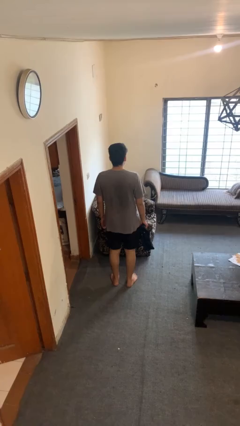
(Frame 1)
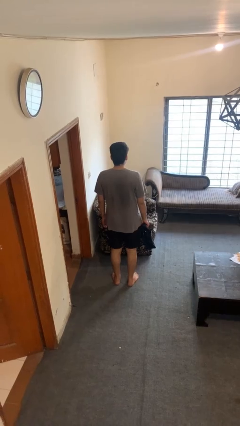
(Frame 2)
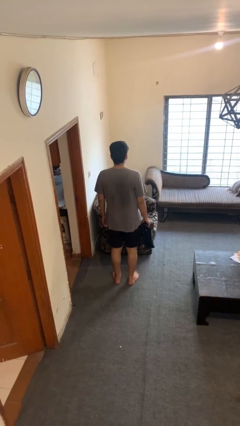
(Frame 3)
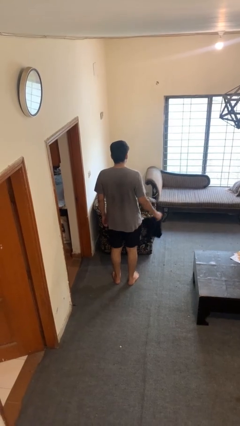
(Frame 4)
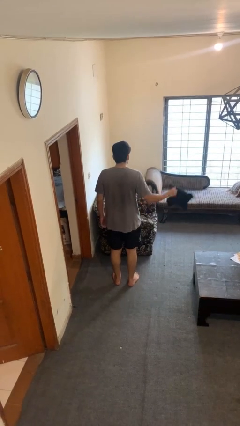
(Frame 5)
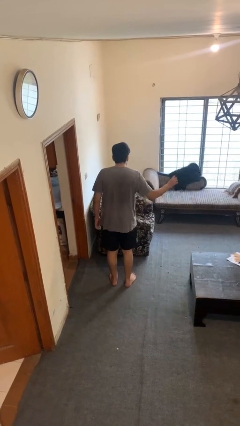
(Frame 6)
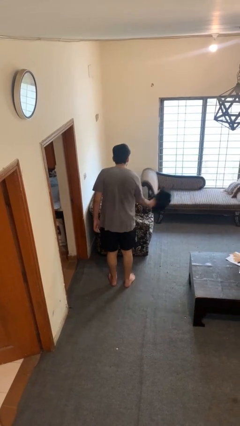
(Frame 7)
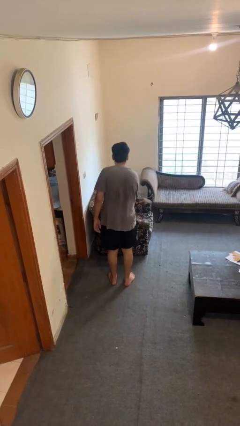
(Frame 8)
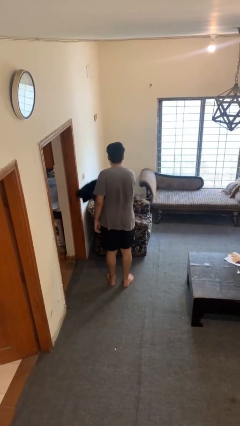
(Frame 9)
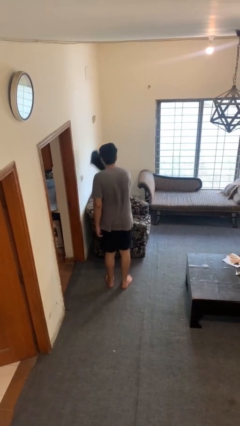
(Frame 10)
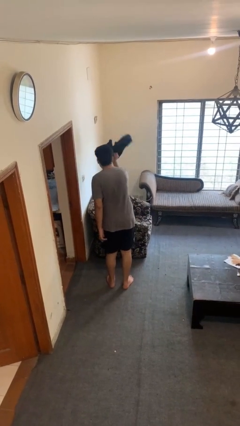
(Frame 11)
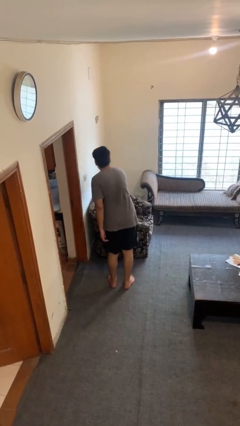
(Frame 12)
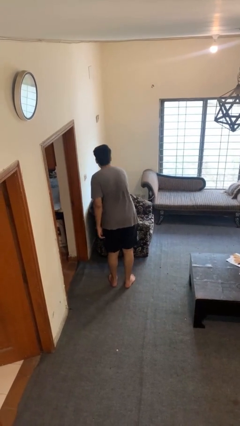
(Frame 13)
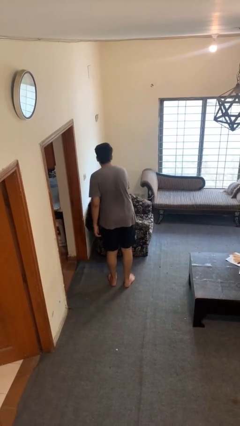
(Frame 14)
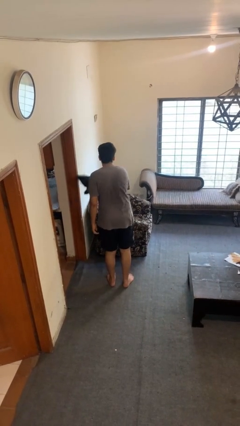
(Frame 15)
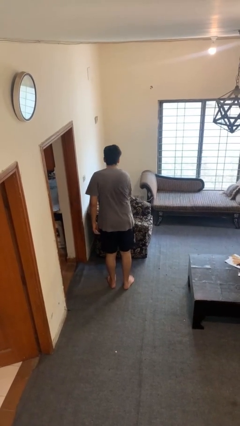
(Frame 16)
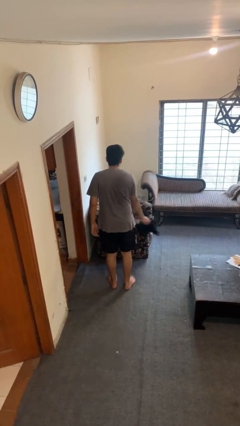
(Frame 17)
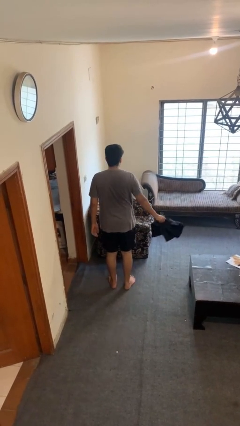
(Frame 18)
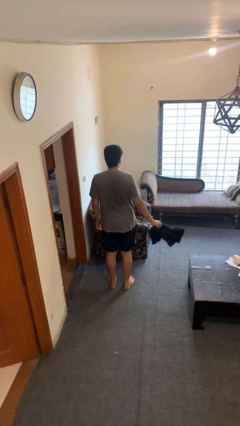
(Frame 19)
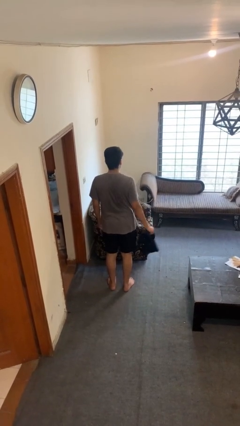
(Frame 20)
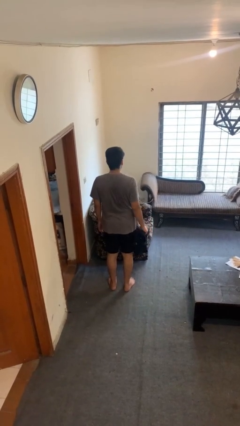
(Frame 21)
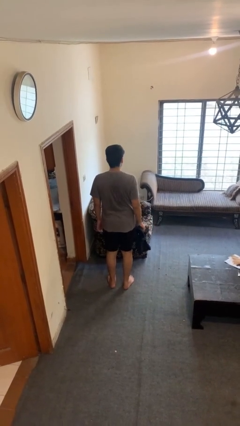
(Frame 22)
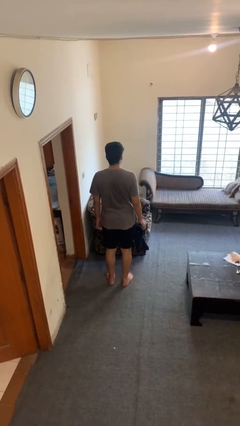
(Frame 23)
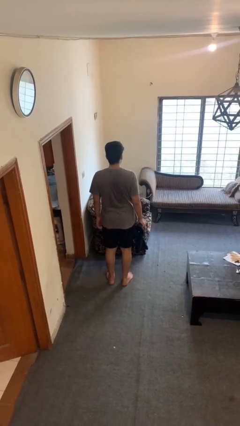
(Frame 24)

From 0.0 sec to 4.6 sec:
person dusts furniture

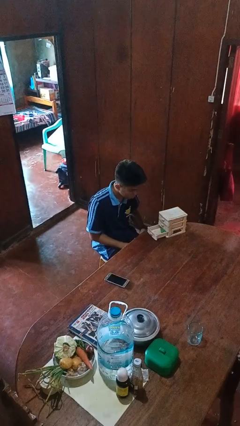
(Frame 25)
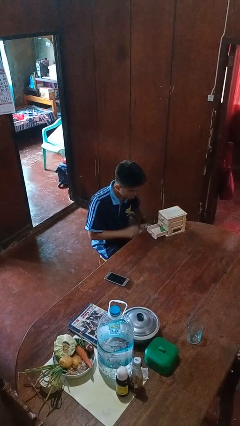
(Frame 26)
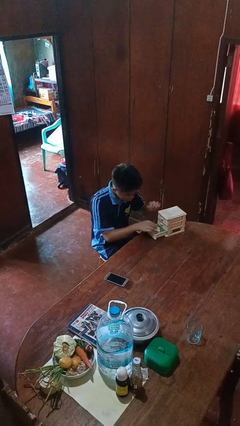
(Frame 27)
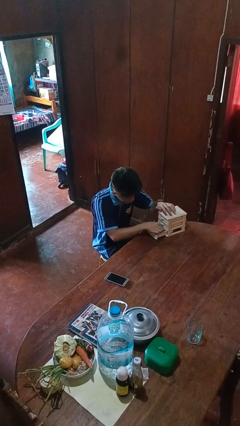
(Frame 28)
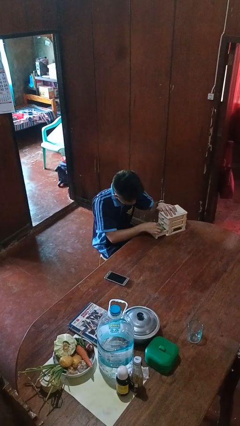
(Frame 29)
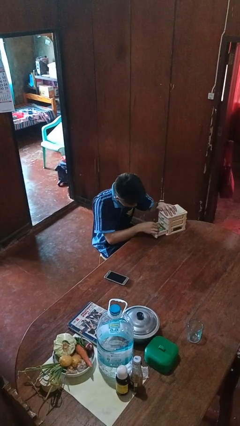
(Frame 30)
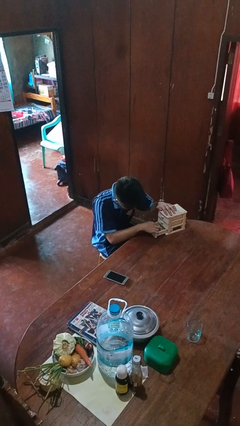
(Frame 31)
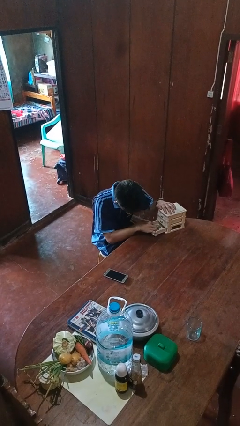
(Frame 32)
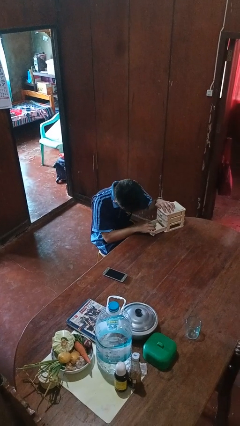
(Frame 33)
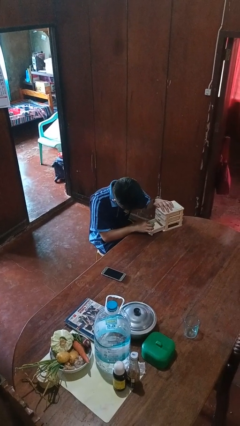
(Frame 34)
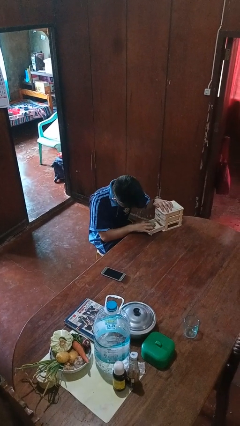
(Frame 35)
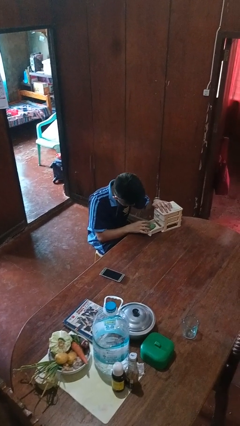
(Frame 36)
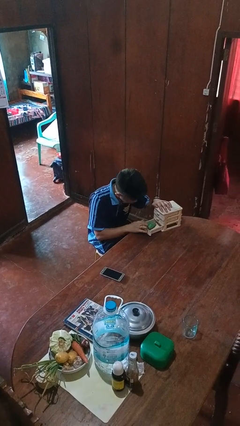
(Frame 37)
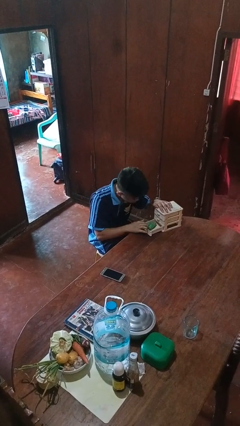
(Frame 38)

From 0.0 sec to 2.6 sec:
person searches jewelry box

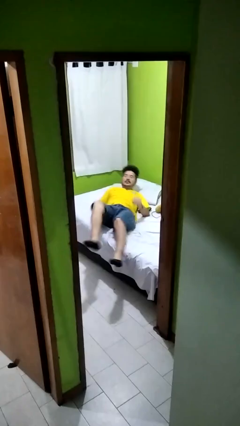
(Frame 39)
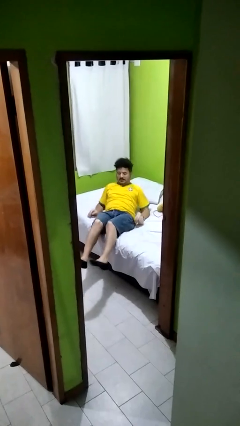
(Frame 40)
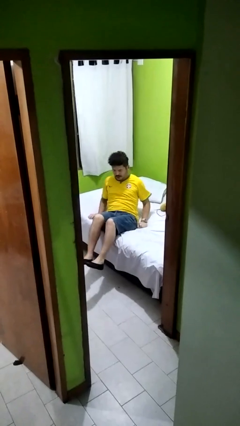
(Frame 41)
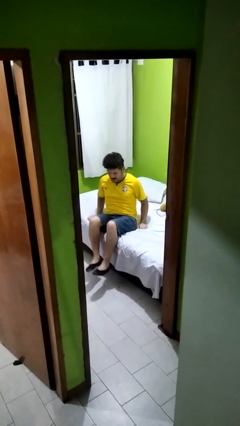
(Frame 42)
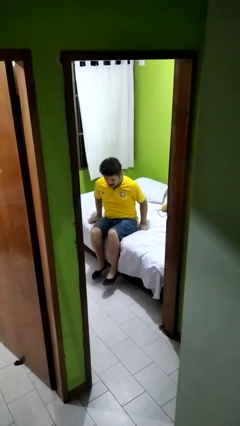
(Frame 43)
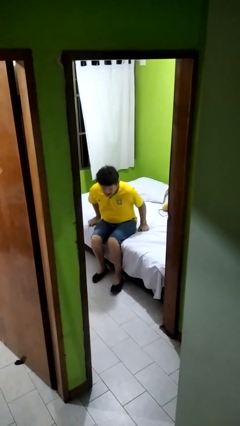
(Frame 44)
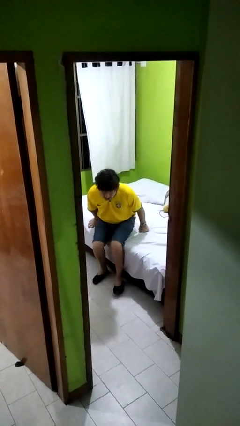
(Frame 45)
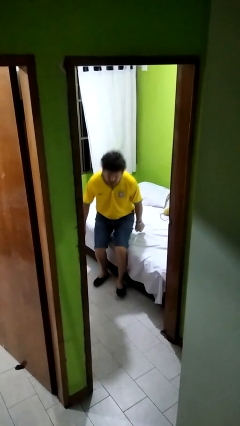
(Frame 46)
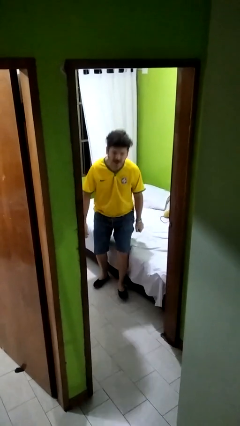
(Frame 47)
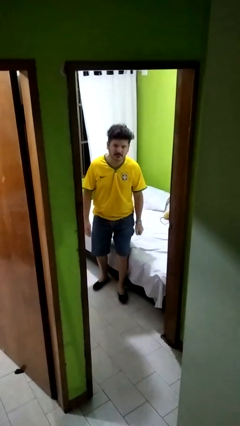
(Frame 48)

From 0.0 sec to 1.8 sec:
person stands up

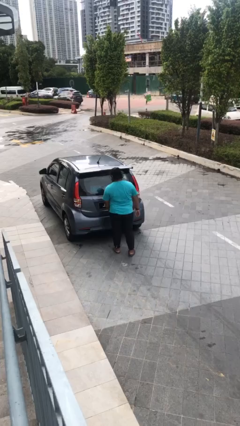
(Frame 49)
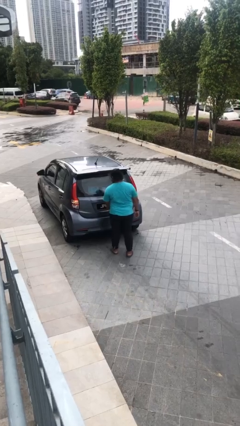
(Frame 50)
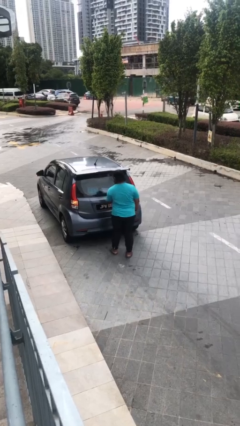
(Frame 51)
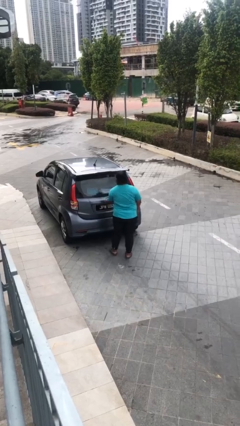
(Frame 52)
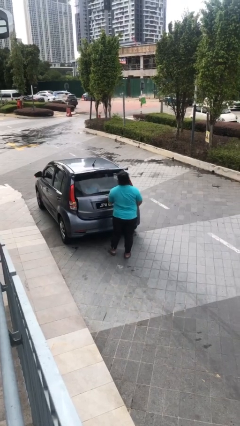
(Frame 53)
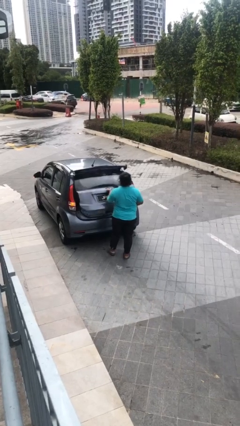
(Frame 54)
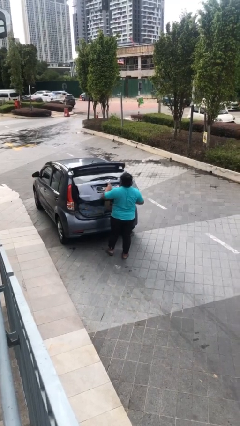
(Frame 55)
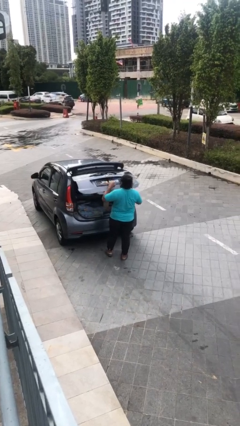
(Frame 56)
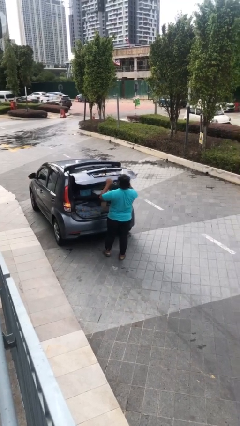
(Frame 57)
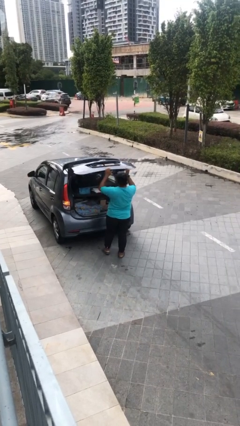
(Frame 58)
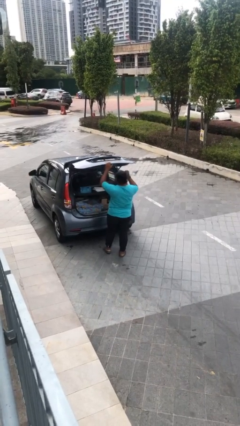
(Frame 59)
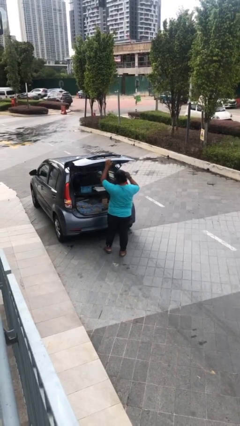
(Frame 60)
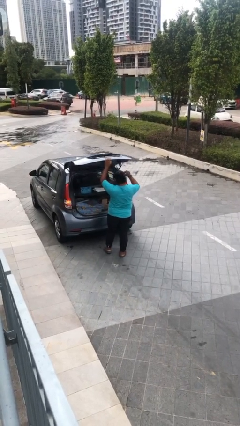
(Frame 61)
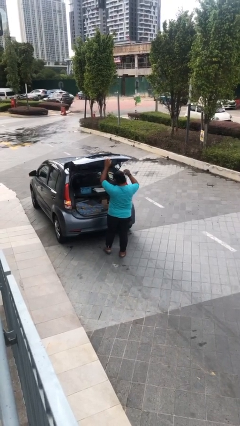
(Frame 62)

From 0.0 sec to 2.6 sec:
person opens car trunk

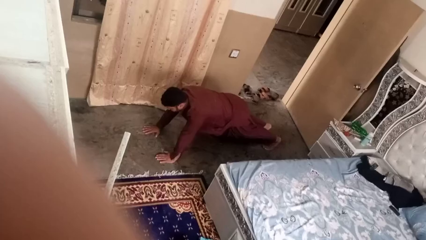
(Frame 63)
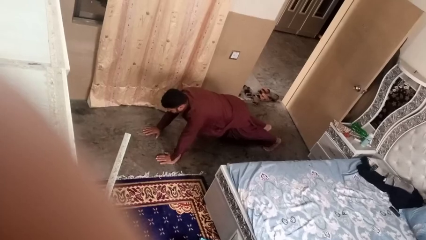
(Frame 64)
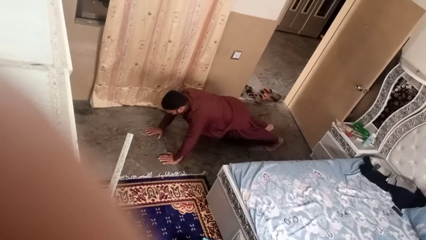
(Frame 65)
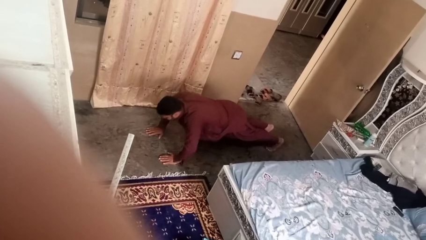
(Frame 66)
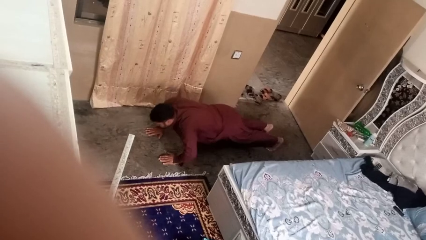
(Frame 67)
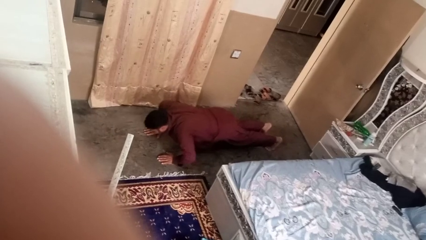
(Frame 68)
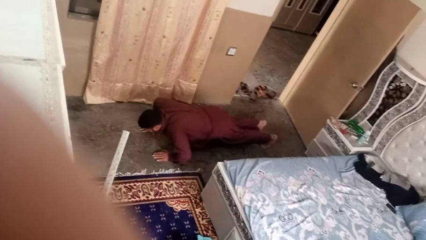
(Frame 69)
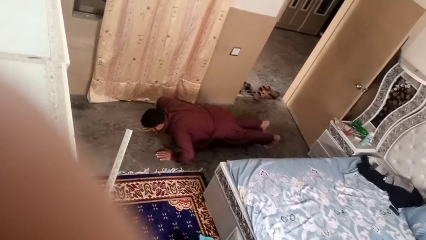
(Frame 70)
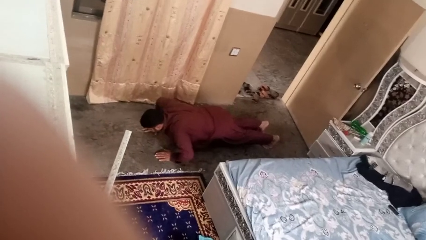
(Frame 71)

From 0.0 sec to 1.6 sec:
person exercises with pushup

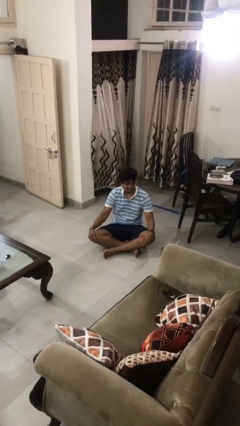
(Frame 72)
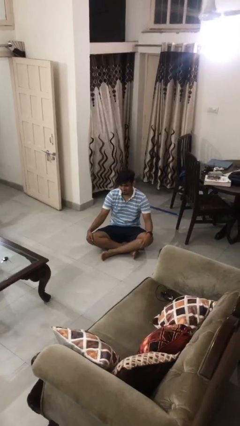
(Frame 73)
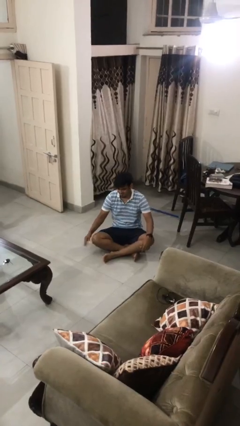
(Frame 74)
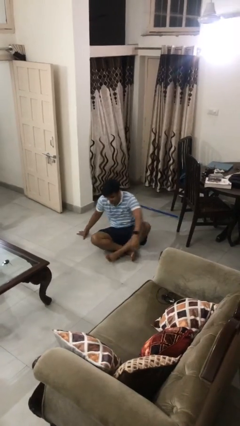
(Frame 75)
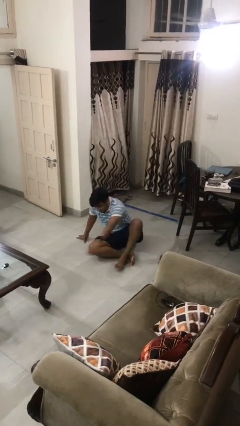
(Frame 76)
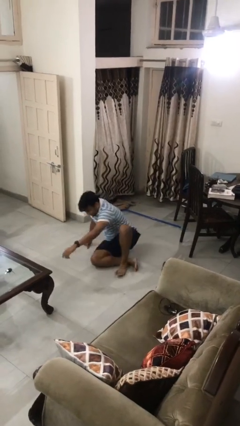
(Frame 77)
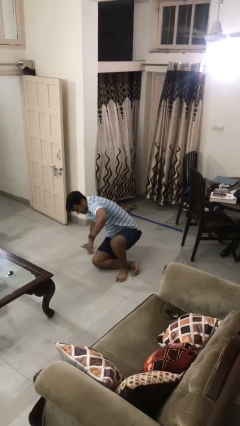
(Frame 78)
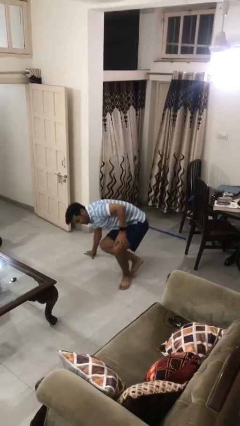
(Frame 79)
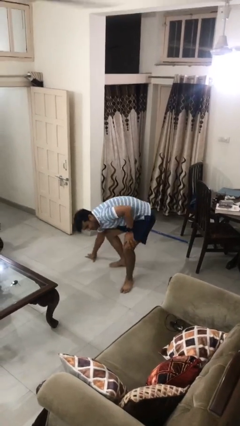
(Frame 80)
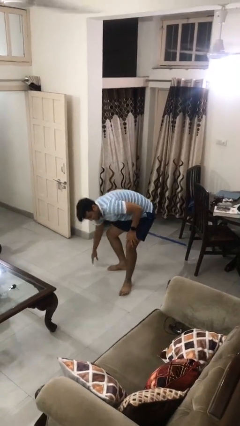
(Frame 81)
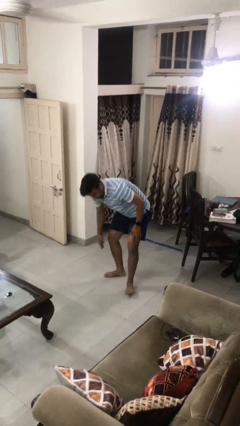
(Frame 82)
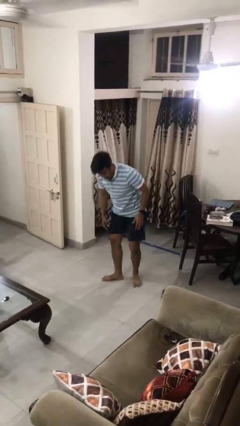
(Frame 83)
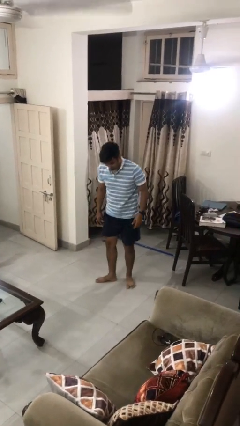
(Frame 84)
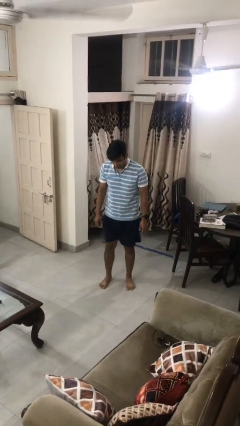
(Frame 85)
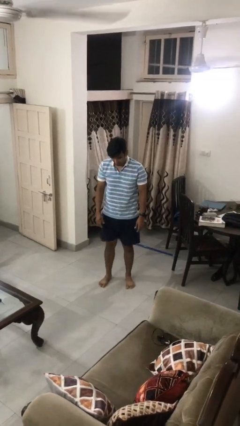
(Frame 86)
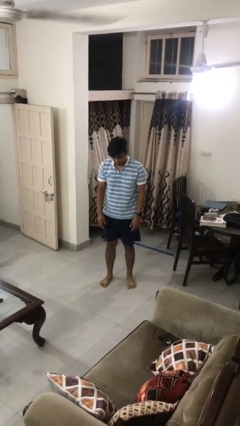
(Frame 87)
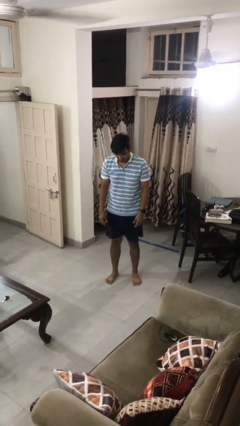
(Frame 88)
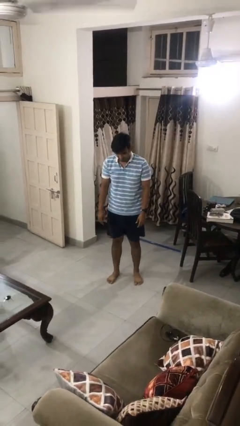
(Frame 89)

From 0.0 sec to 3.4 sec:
person stands up from floor

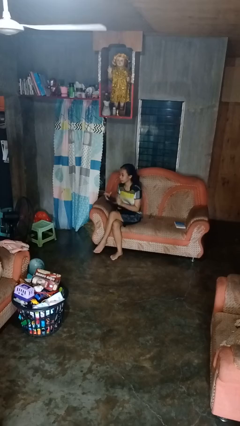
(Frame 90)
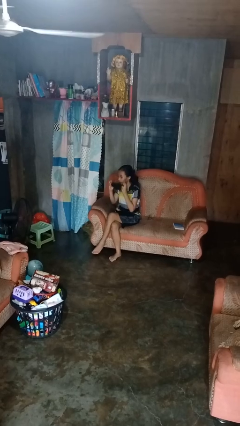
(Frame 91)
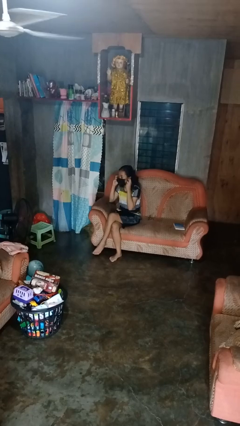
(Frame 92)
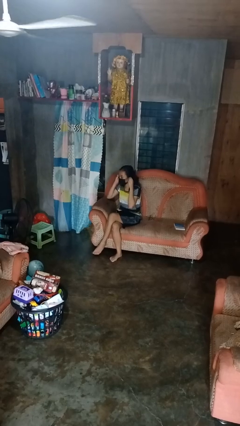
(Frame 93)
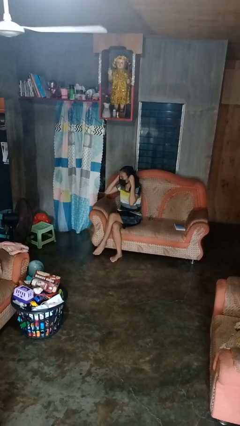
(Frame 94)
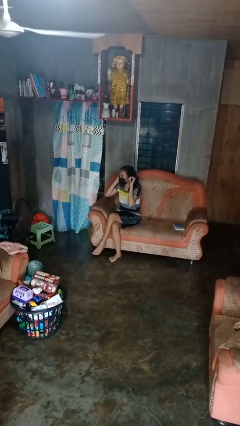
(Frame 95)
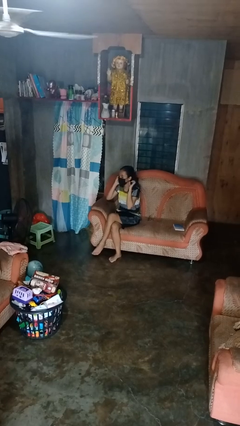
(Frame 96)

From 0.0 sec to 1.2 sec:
person puts on facemask
